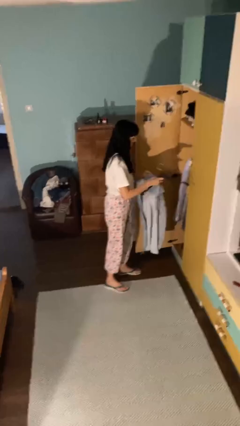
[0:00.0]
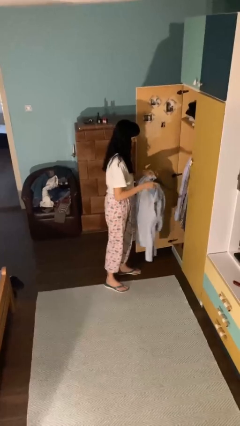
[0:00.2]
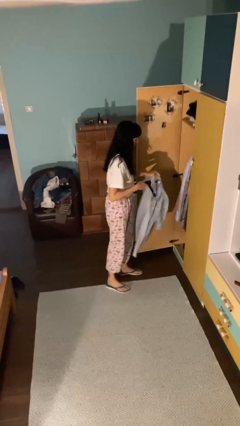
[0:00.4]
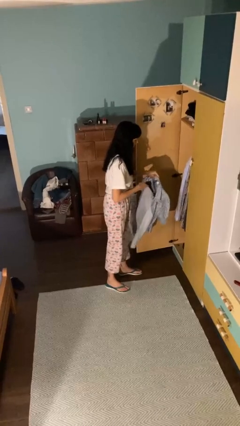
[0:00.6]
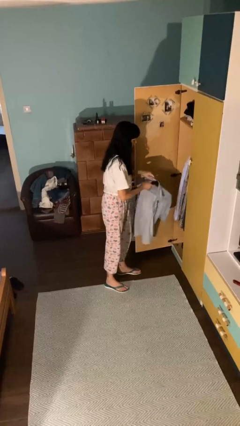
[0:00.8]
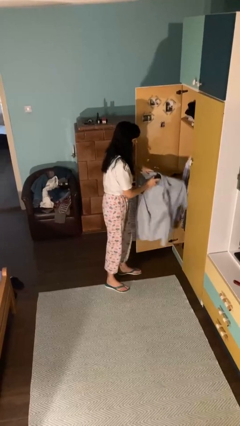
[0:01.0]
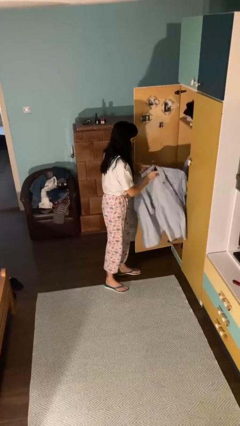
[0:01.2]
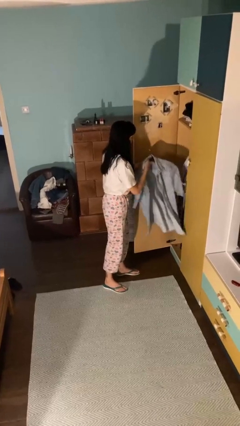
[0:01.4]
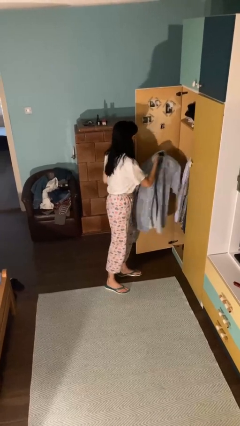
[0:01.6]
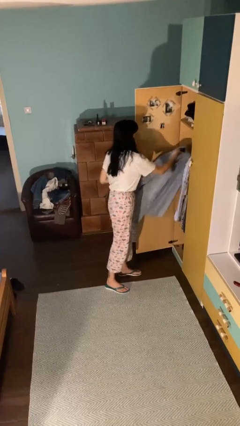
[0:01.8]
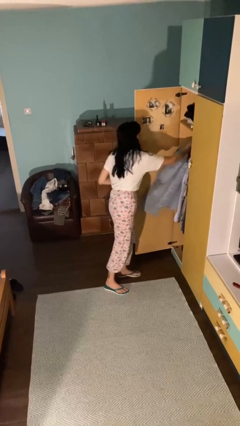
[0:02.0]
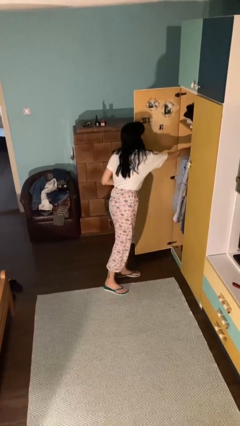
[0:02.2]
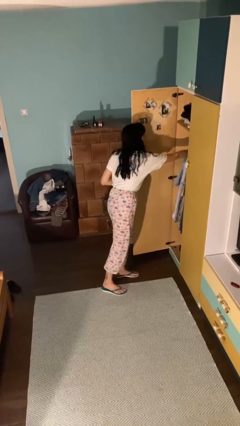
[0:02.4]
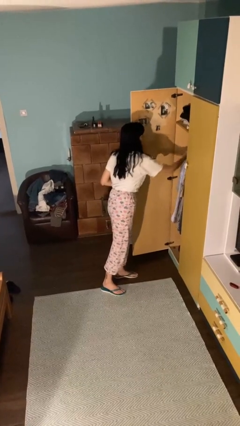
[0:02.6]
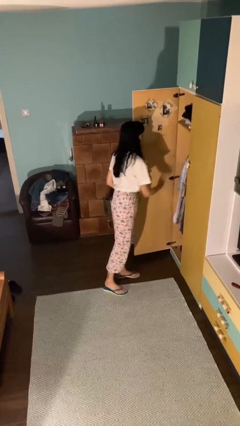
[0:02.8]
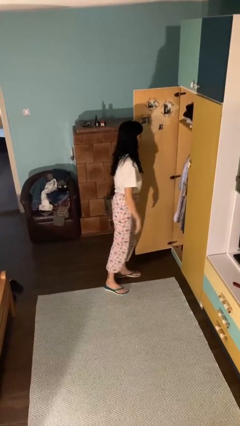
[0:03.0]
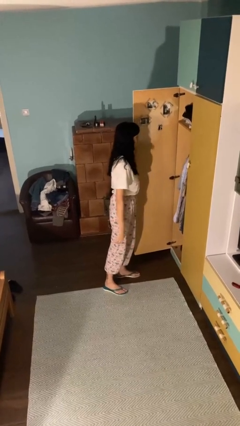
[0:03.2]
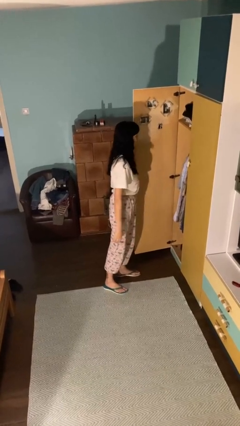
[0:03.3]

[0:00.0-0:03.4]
person puts clothes into closet

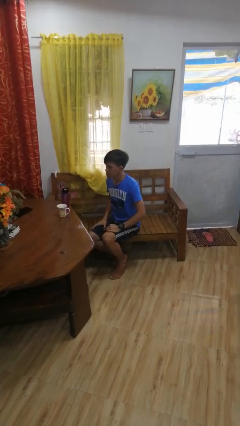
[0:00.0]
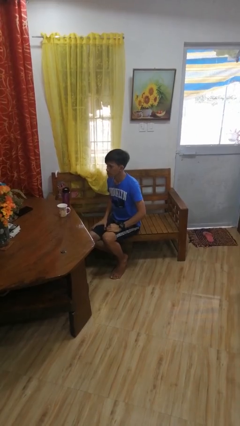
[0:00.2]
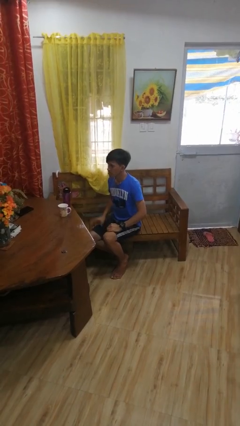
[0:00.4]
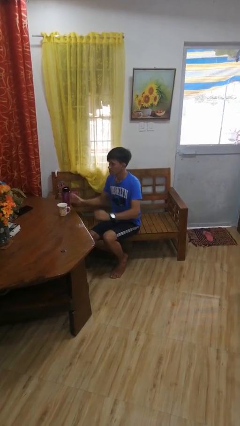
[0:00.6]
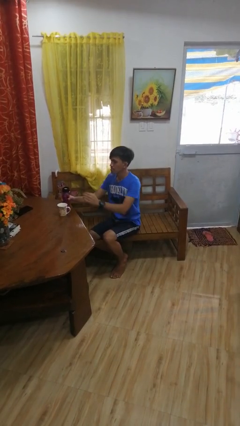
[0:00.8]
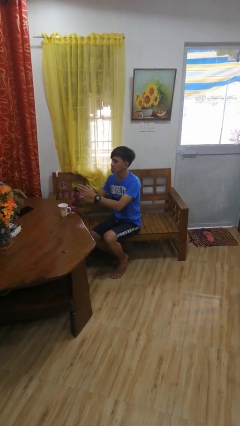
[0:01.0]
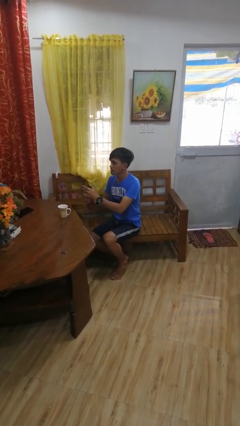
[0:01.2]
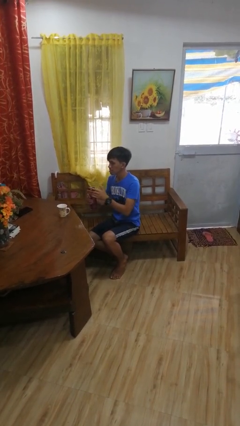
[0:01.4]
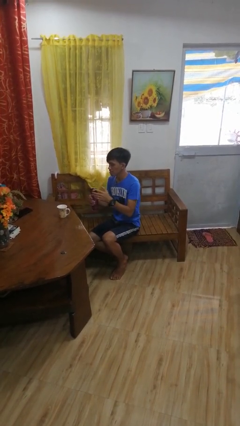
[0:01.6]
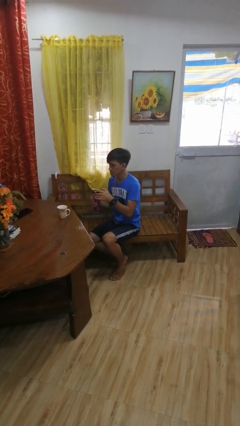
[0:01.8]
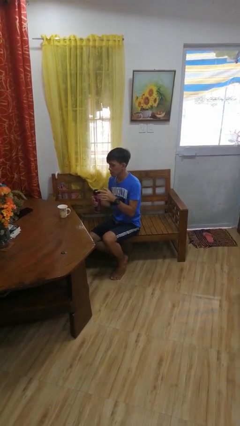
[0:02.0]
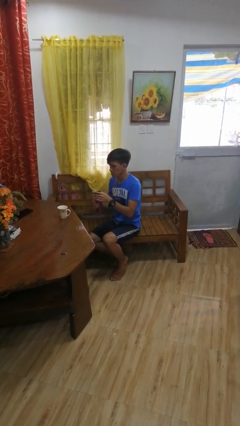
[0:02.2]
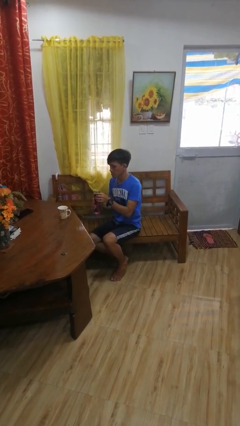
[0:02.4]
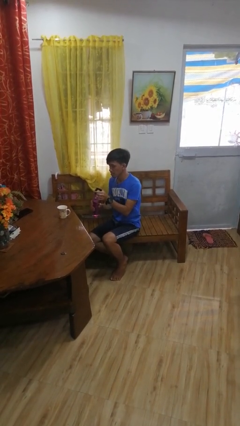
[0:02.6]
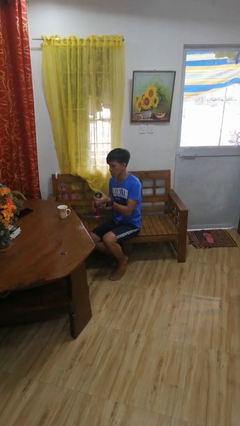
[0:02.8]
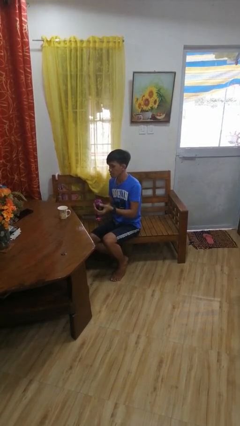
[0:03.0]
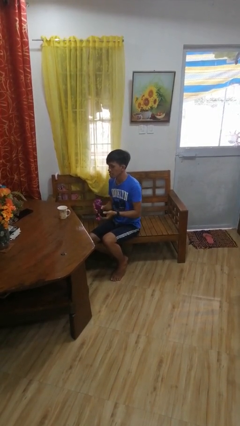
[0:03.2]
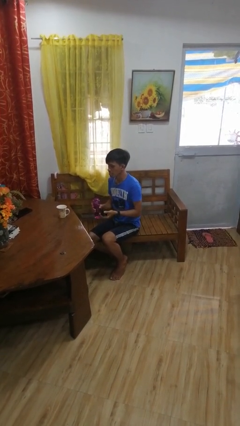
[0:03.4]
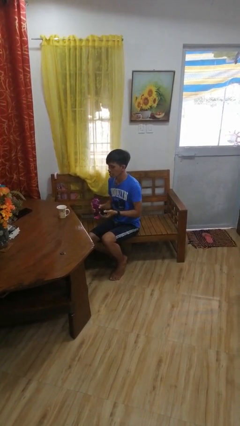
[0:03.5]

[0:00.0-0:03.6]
person unscrews lid from bottle

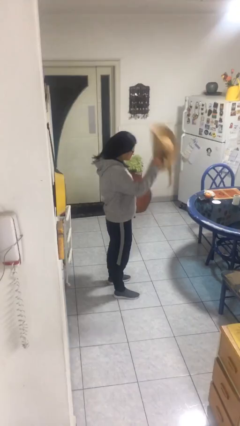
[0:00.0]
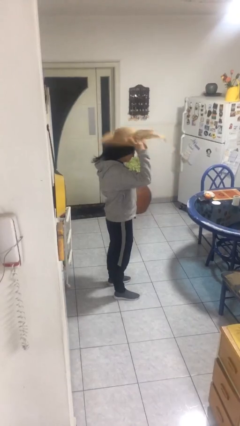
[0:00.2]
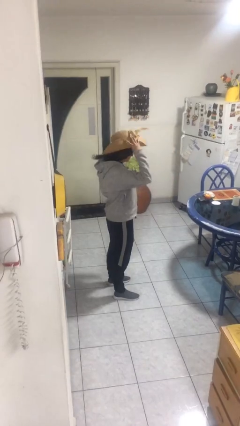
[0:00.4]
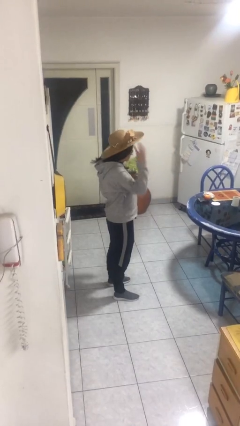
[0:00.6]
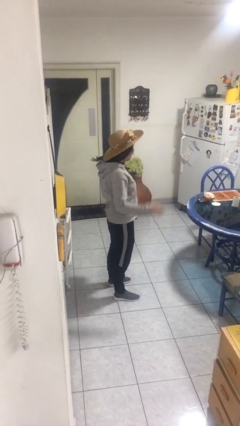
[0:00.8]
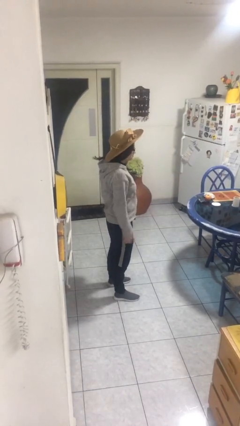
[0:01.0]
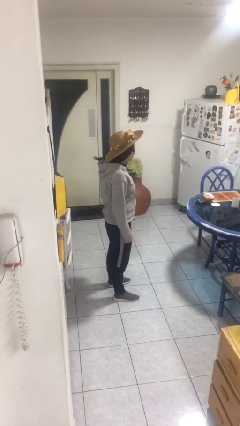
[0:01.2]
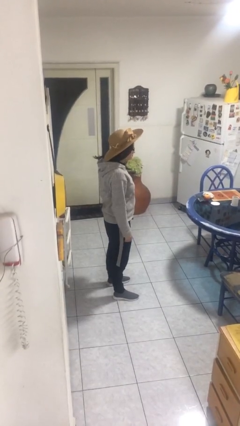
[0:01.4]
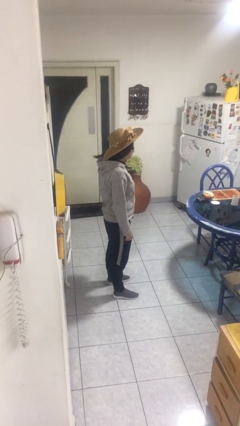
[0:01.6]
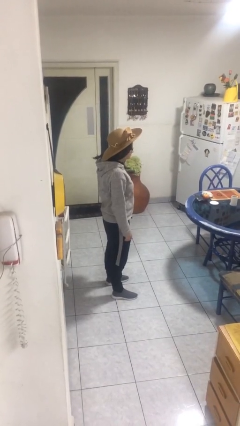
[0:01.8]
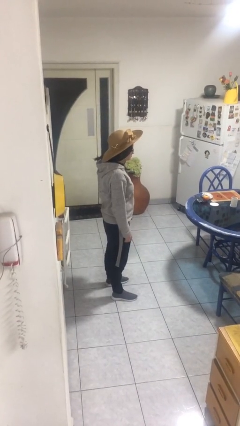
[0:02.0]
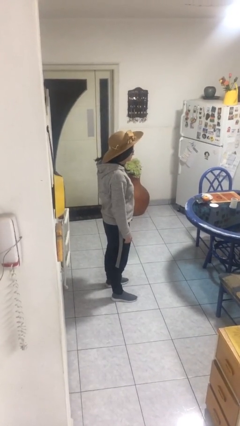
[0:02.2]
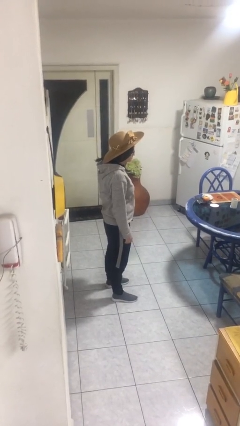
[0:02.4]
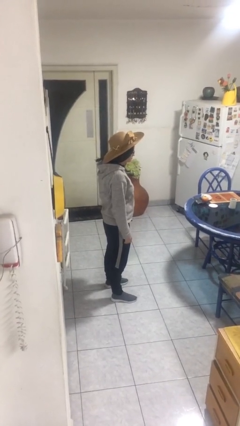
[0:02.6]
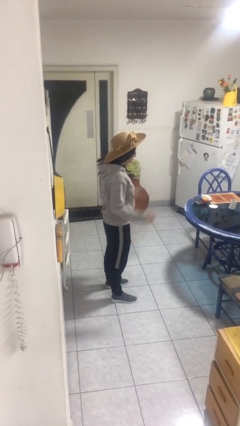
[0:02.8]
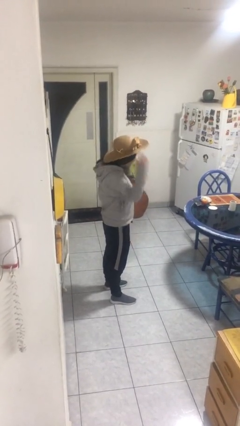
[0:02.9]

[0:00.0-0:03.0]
person puts on hat

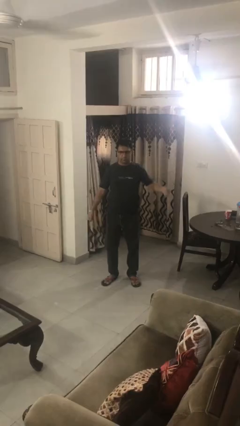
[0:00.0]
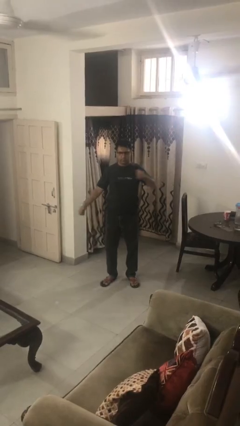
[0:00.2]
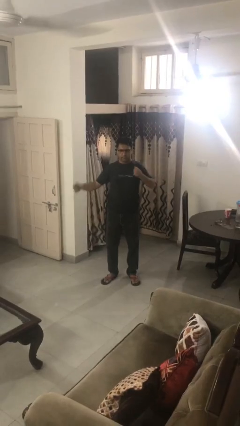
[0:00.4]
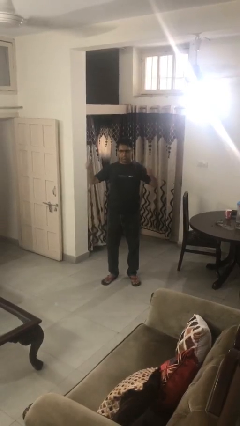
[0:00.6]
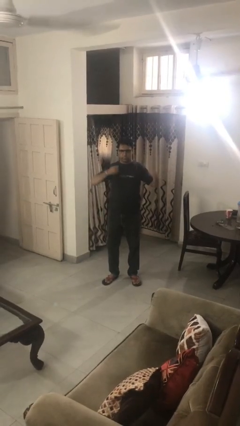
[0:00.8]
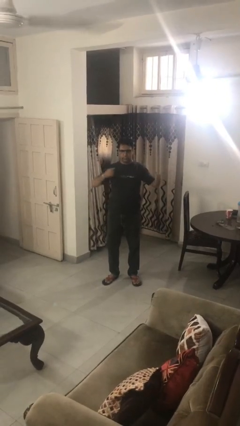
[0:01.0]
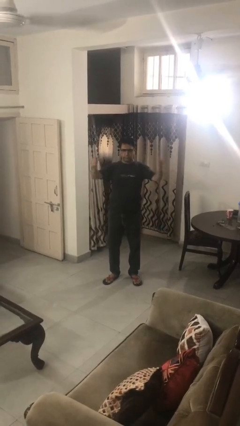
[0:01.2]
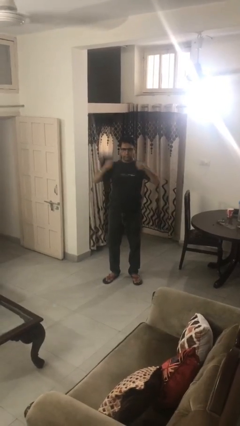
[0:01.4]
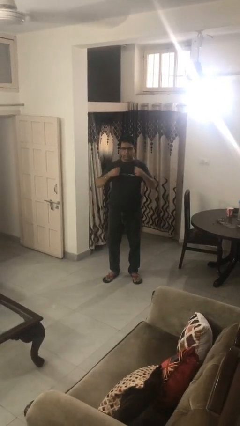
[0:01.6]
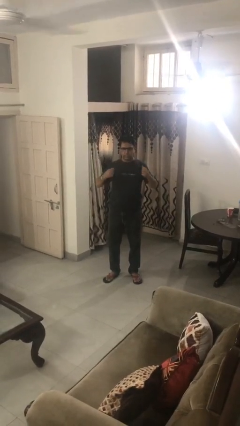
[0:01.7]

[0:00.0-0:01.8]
person drums on chest

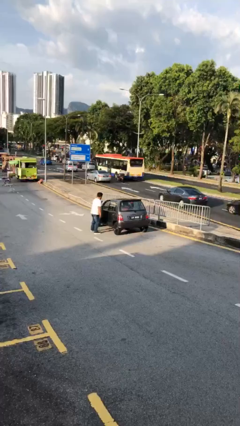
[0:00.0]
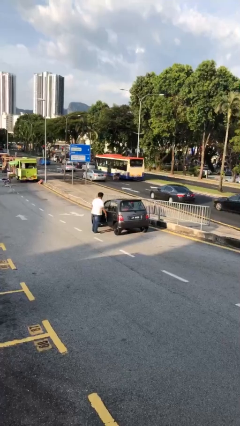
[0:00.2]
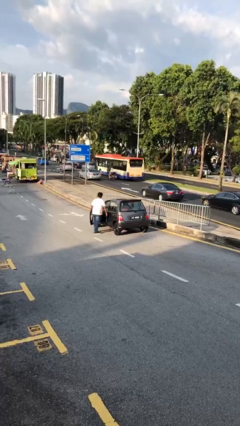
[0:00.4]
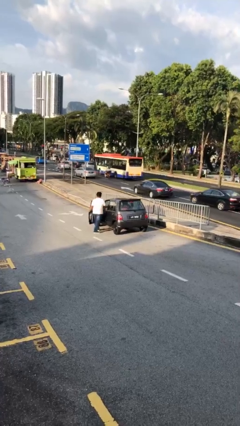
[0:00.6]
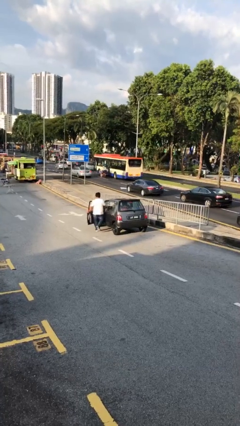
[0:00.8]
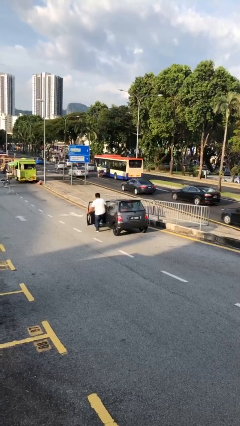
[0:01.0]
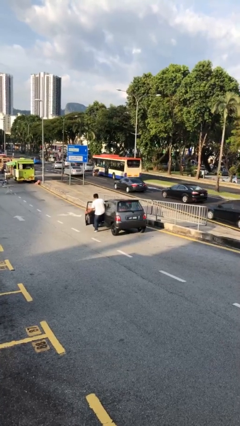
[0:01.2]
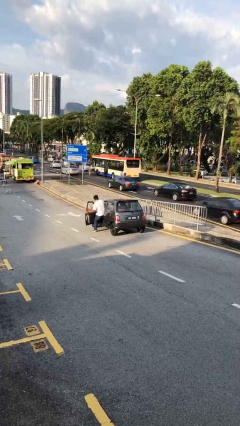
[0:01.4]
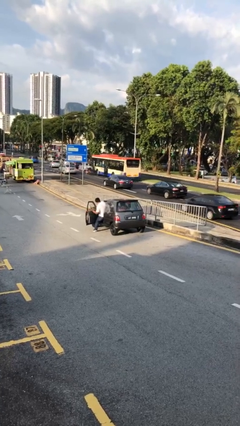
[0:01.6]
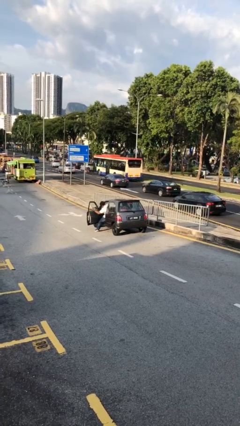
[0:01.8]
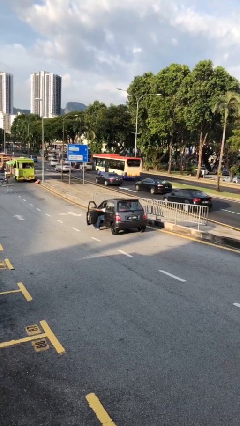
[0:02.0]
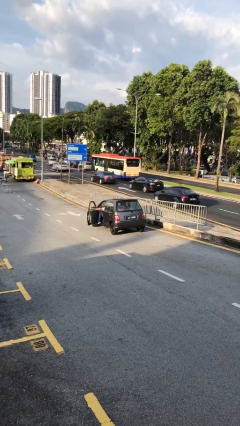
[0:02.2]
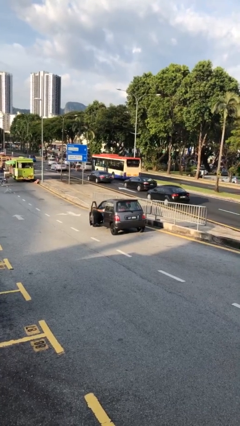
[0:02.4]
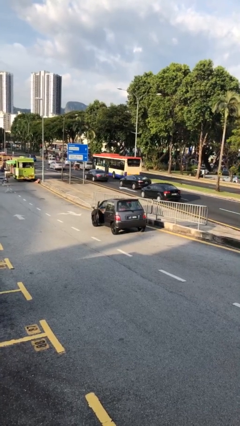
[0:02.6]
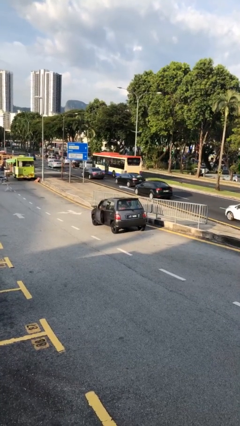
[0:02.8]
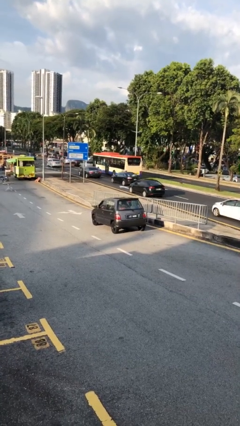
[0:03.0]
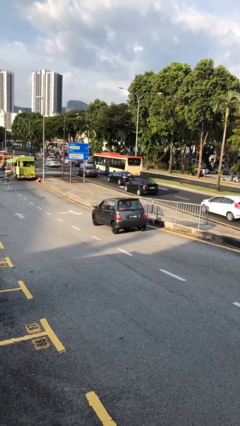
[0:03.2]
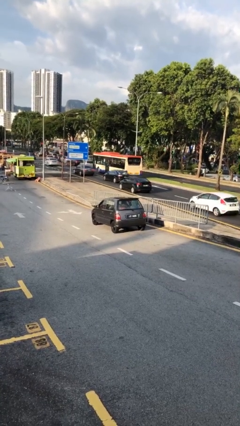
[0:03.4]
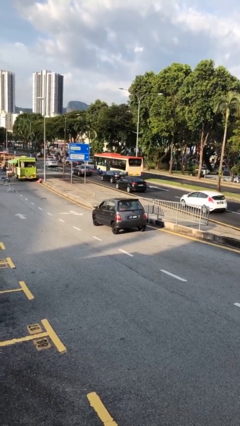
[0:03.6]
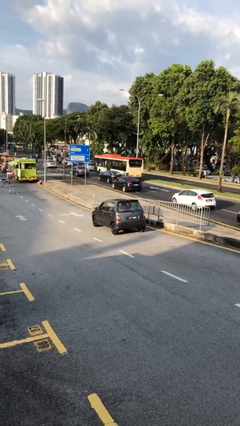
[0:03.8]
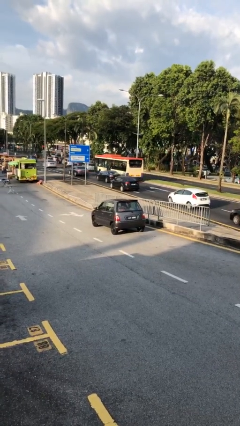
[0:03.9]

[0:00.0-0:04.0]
car picks up person

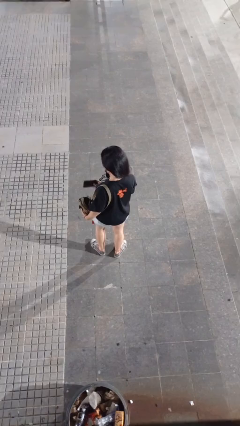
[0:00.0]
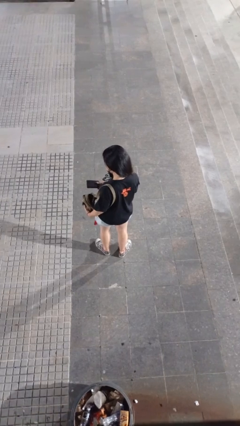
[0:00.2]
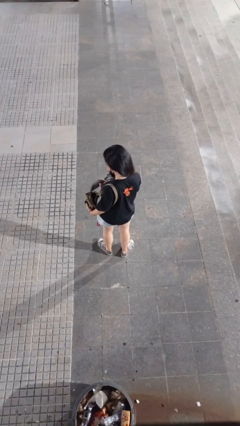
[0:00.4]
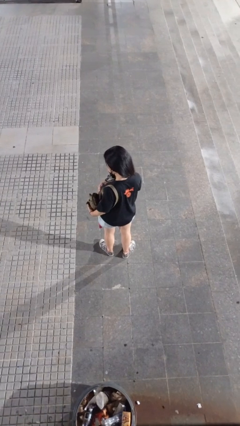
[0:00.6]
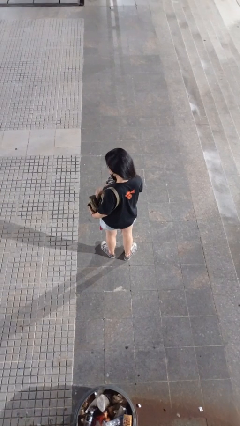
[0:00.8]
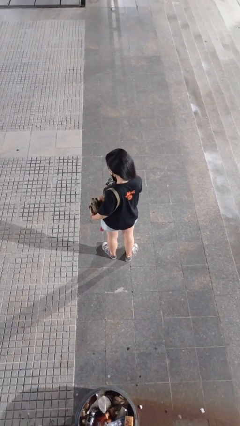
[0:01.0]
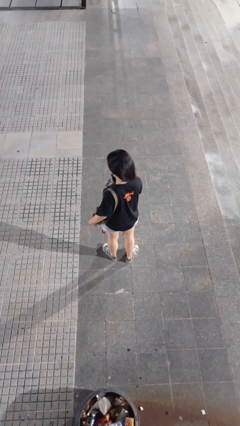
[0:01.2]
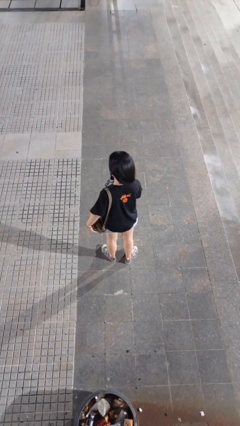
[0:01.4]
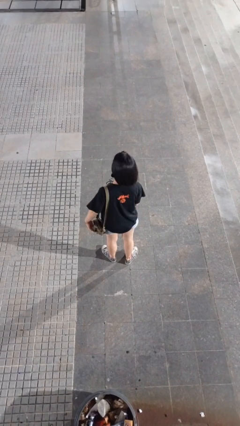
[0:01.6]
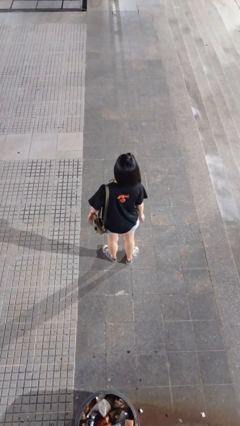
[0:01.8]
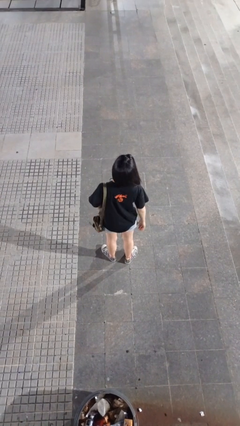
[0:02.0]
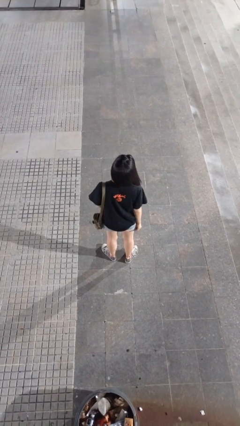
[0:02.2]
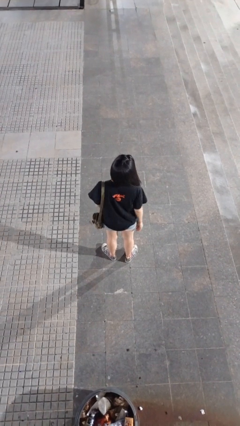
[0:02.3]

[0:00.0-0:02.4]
person puts object into purse
